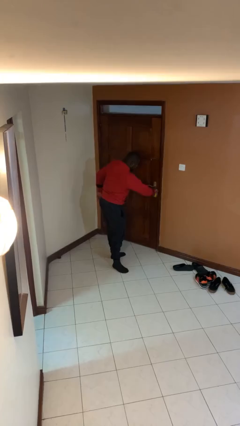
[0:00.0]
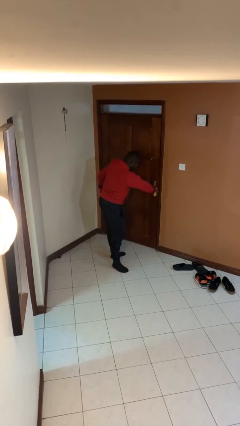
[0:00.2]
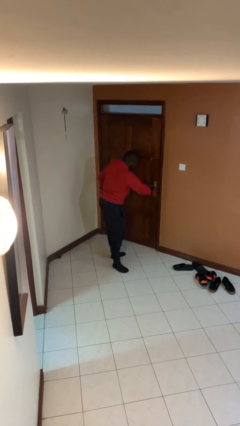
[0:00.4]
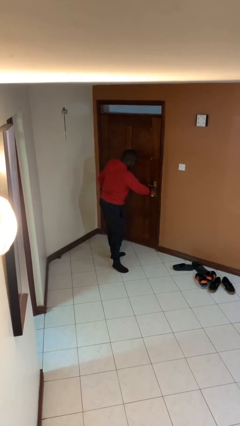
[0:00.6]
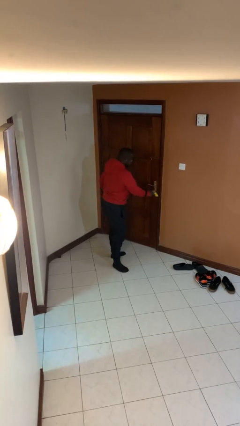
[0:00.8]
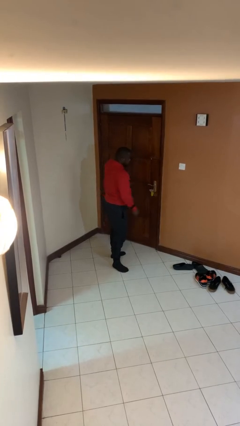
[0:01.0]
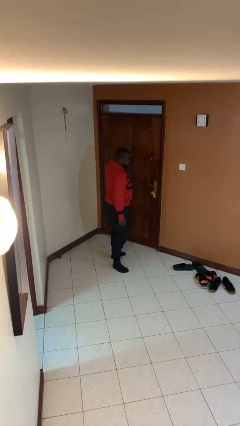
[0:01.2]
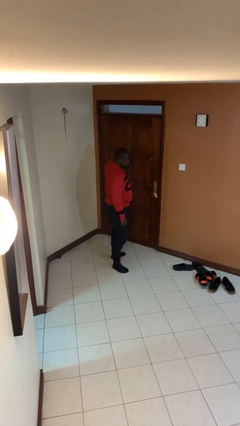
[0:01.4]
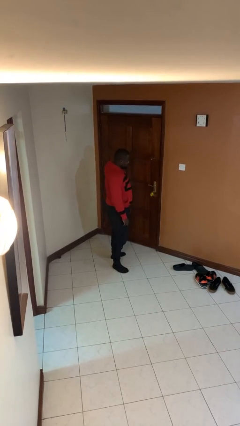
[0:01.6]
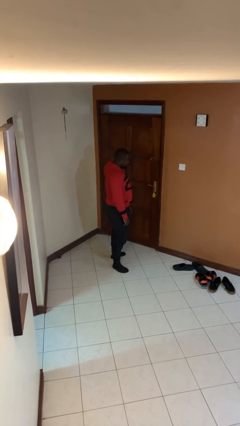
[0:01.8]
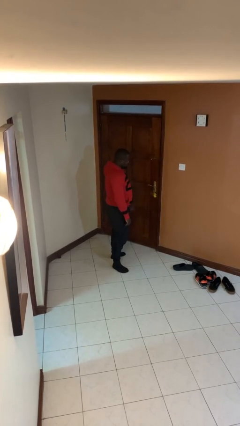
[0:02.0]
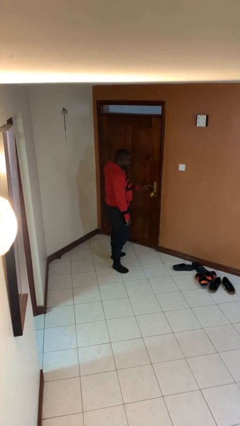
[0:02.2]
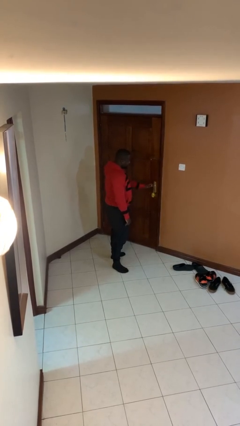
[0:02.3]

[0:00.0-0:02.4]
person unlocks door with keys

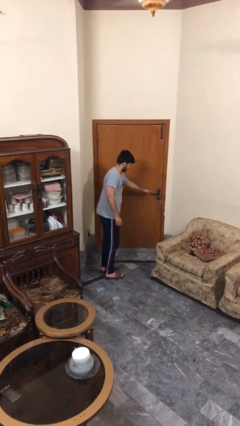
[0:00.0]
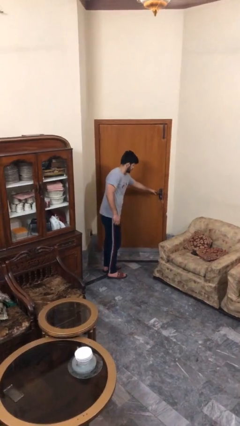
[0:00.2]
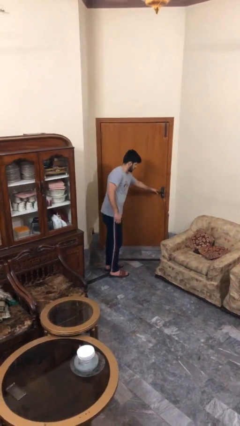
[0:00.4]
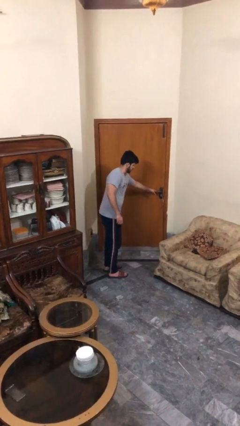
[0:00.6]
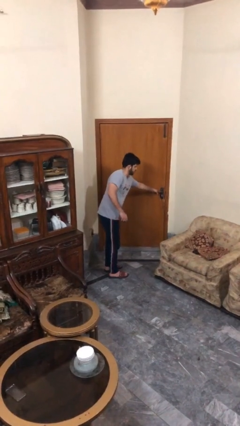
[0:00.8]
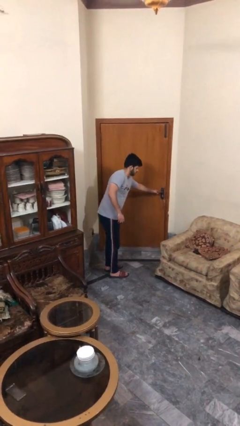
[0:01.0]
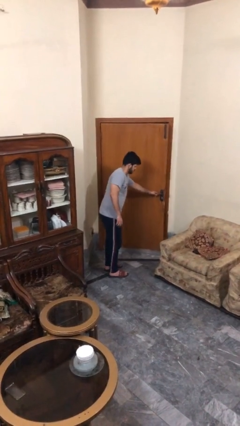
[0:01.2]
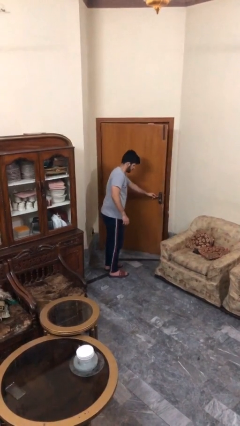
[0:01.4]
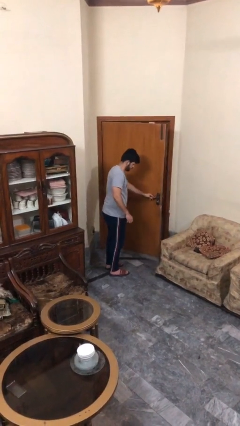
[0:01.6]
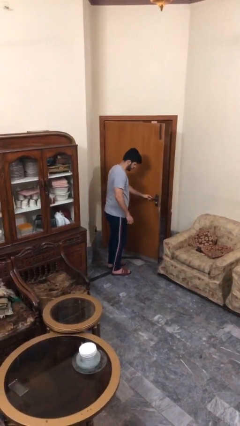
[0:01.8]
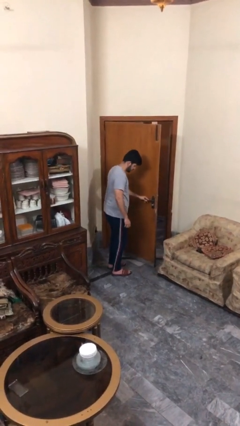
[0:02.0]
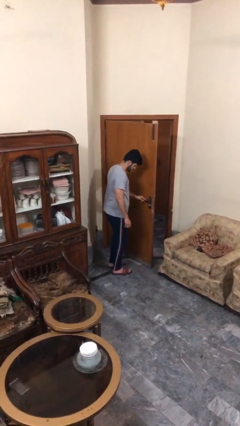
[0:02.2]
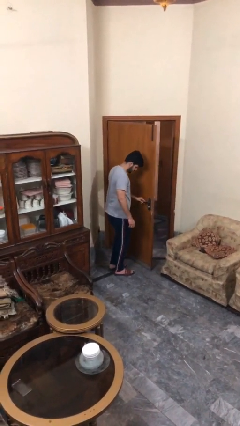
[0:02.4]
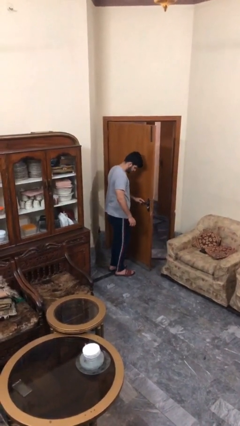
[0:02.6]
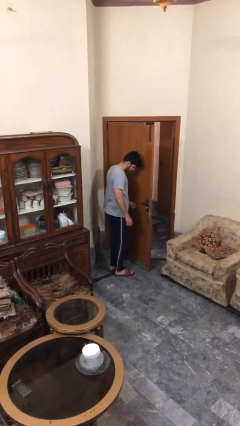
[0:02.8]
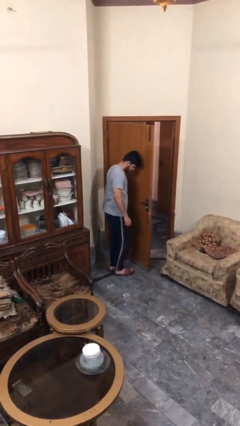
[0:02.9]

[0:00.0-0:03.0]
person opens facility door

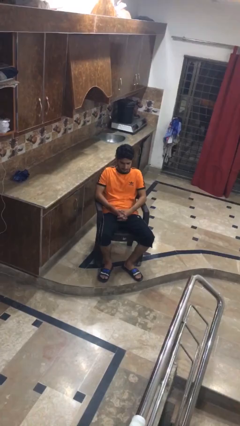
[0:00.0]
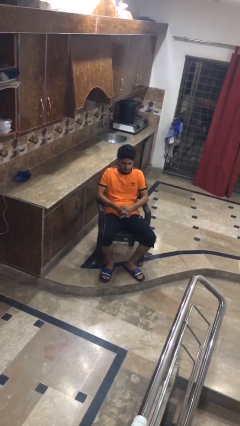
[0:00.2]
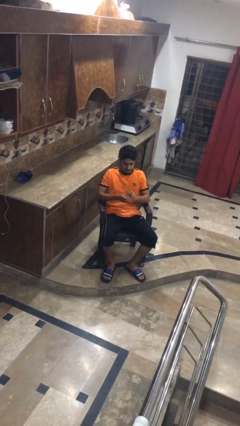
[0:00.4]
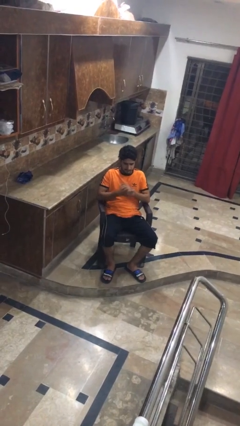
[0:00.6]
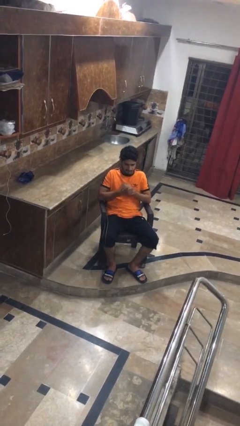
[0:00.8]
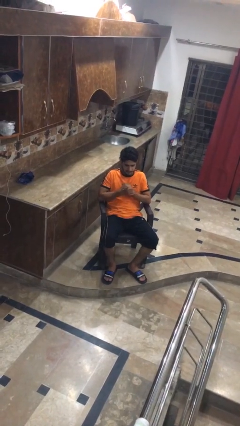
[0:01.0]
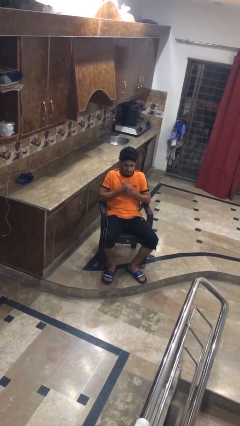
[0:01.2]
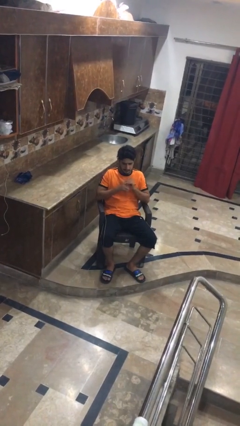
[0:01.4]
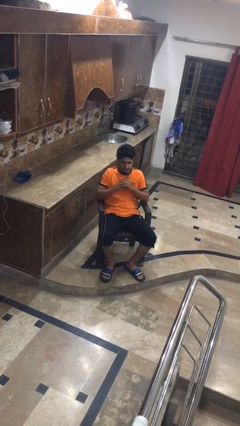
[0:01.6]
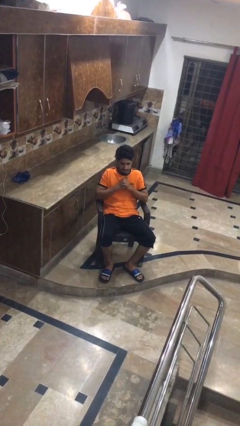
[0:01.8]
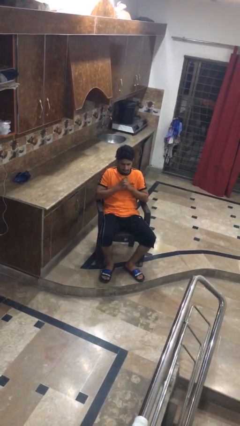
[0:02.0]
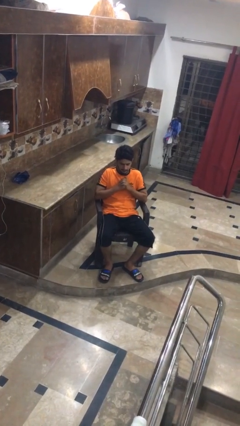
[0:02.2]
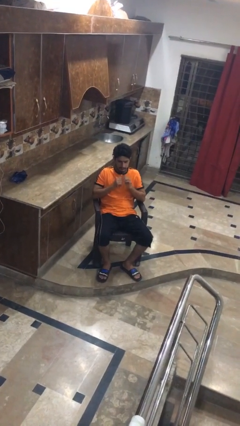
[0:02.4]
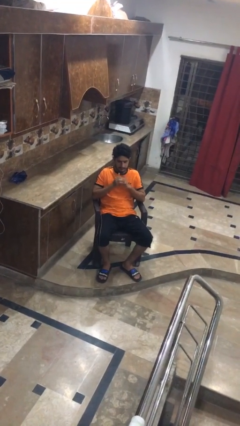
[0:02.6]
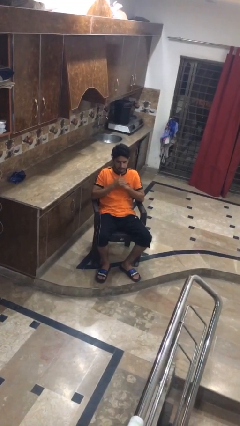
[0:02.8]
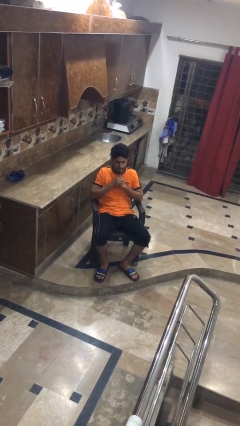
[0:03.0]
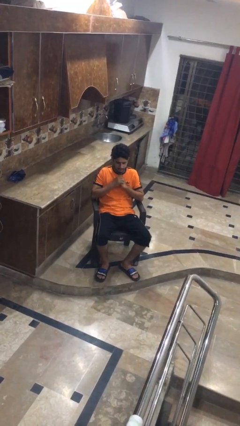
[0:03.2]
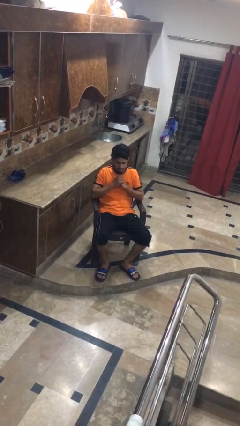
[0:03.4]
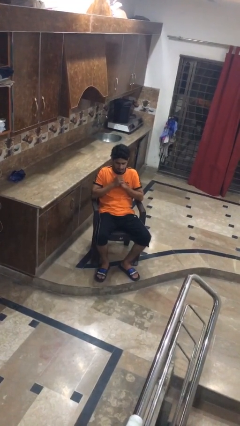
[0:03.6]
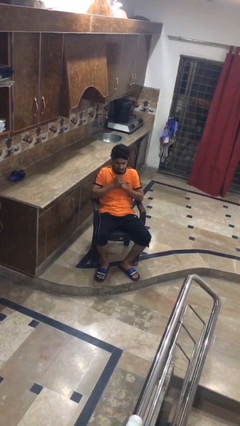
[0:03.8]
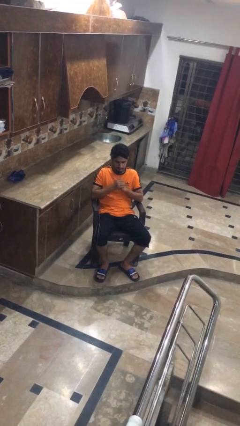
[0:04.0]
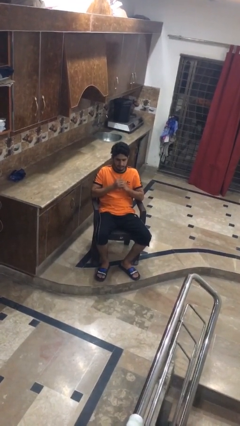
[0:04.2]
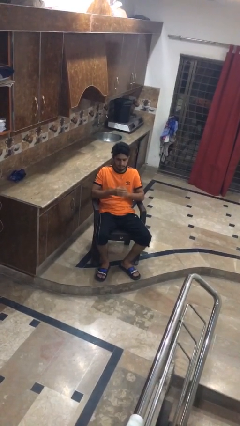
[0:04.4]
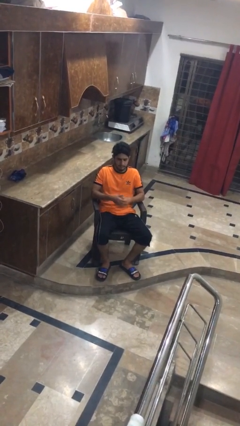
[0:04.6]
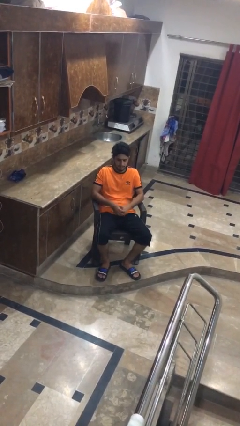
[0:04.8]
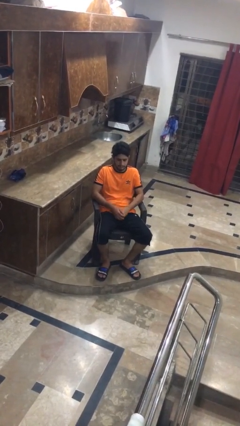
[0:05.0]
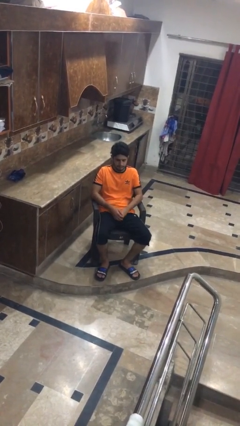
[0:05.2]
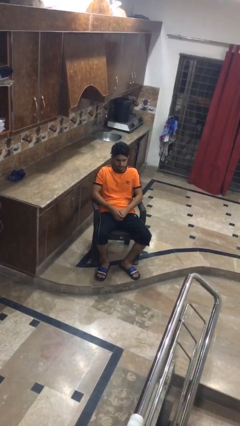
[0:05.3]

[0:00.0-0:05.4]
person cracks knuckles

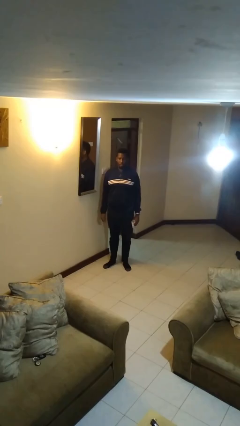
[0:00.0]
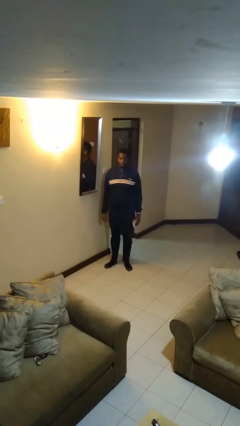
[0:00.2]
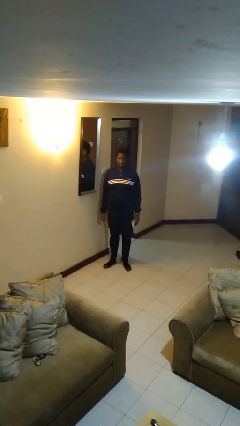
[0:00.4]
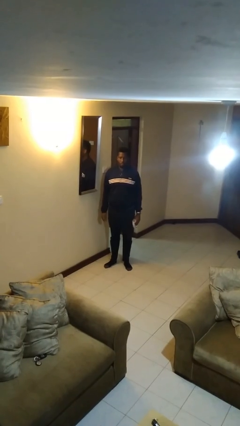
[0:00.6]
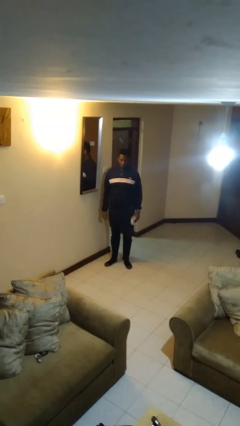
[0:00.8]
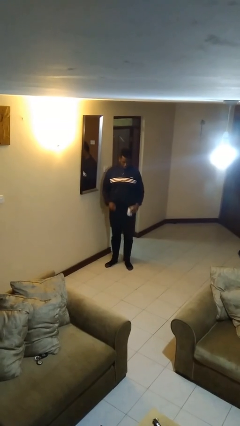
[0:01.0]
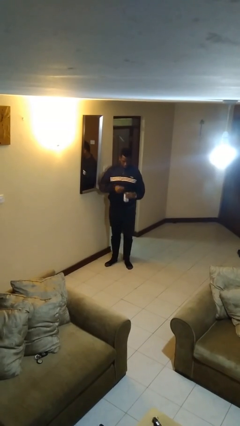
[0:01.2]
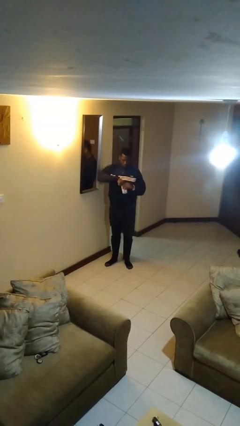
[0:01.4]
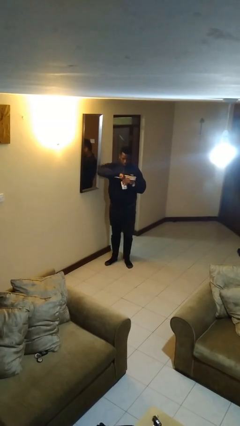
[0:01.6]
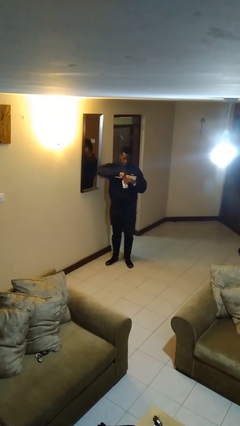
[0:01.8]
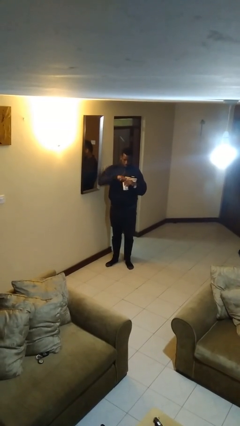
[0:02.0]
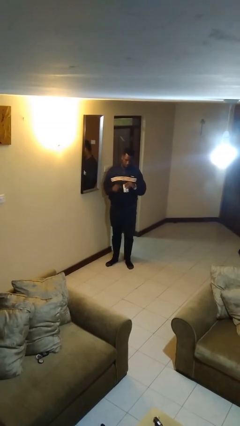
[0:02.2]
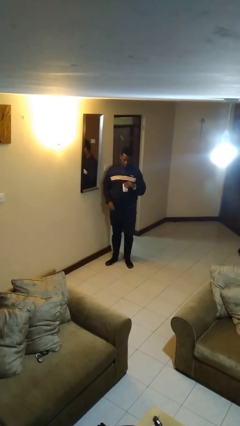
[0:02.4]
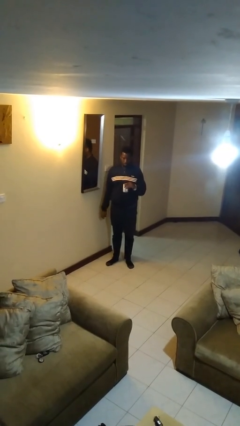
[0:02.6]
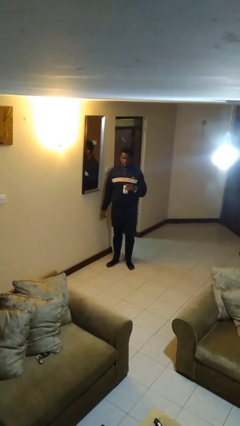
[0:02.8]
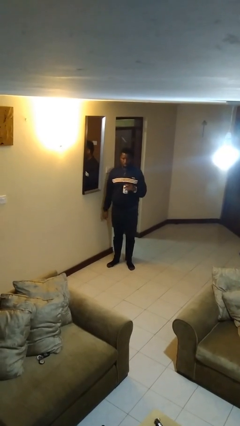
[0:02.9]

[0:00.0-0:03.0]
person opens beverage can

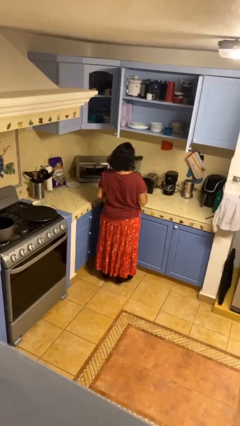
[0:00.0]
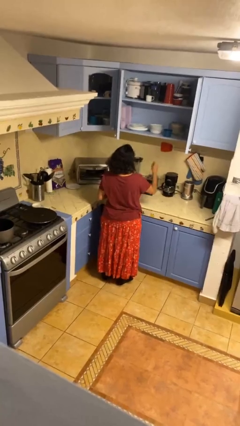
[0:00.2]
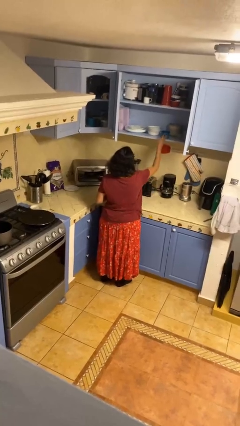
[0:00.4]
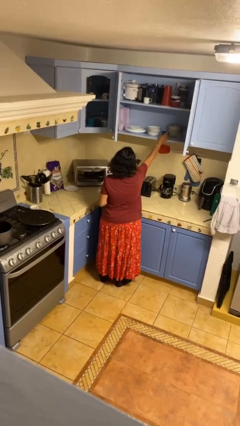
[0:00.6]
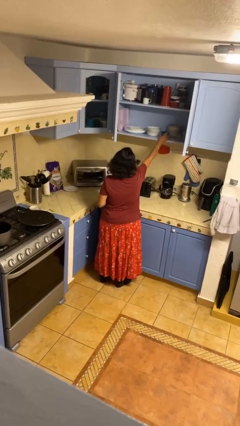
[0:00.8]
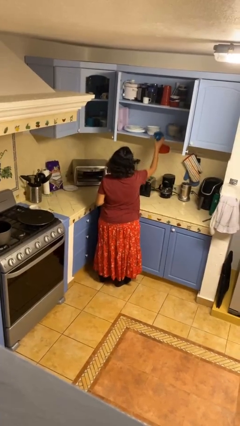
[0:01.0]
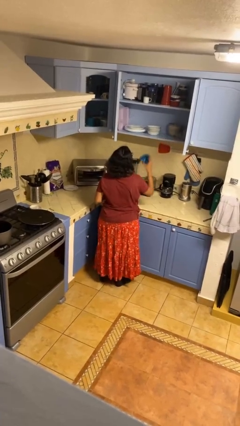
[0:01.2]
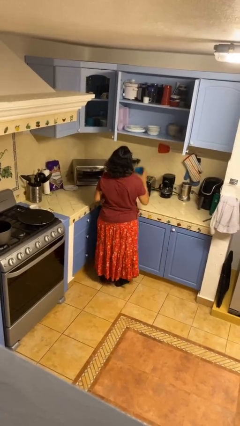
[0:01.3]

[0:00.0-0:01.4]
person picks up object from cabinet

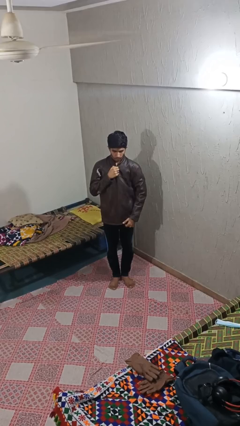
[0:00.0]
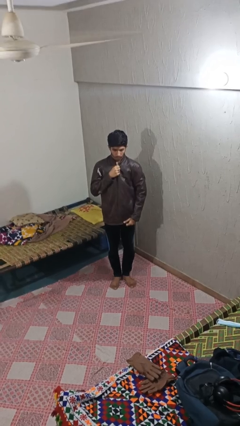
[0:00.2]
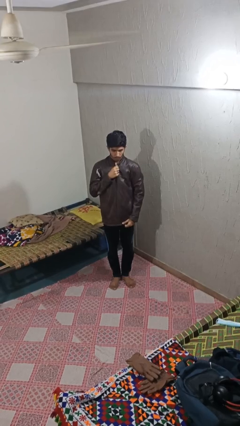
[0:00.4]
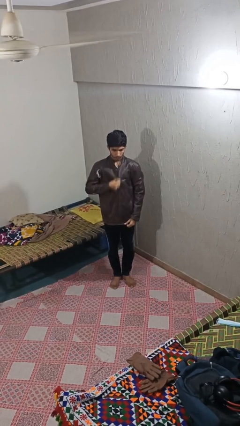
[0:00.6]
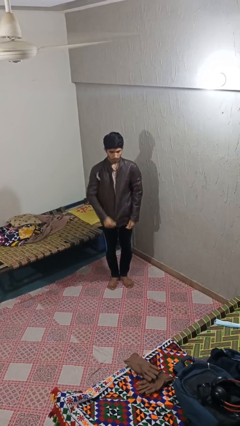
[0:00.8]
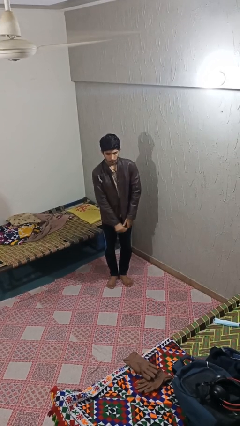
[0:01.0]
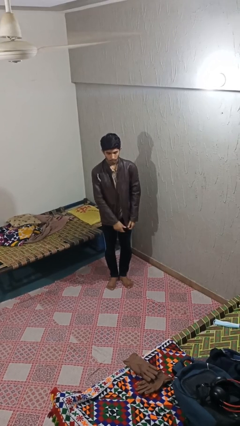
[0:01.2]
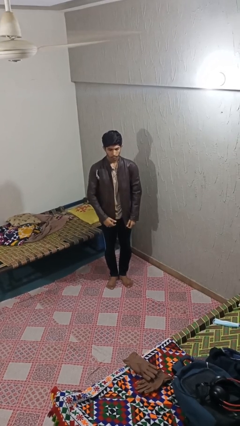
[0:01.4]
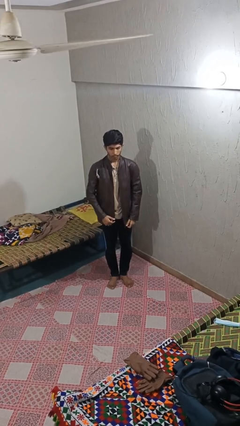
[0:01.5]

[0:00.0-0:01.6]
person unzips jacket

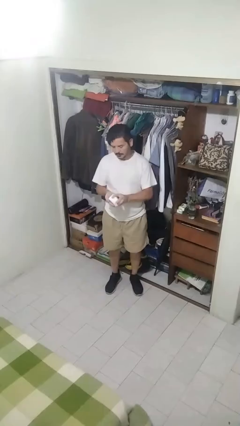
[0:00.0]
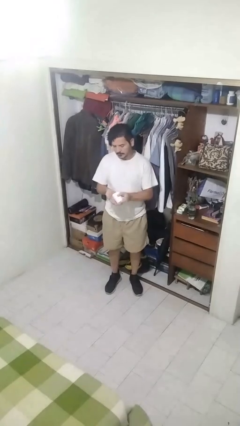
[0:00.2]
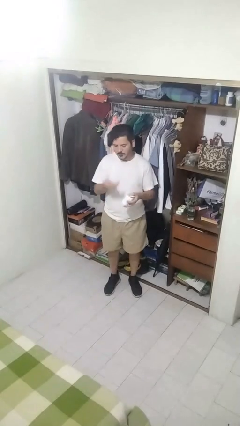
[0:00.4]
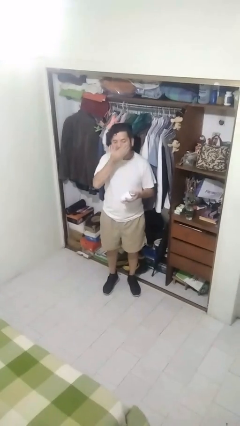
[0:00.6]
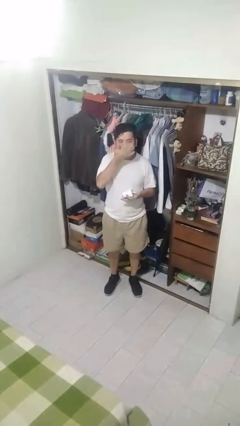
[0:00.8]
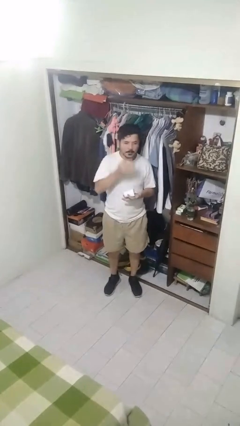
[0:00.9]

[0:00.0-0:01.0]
person takes medicine pills
